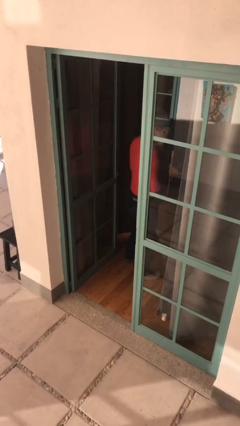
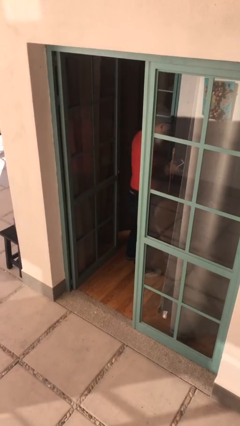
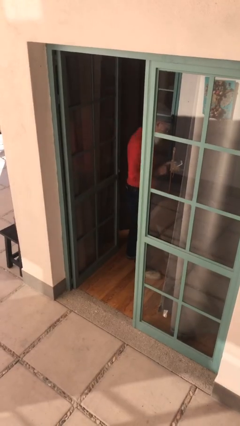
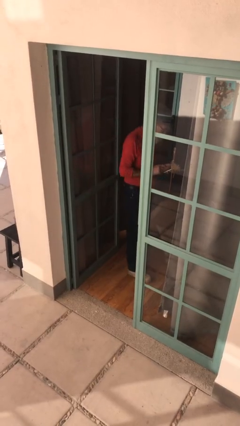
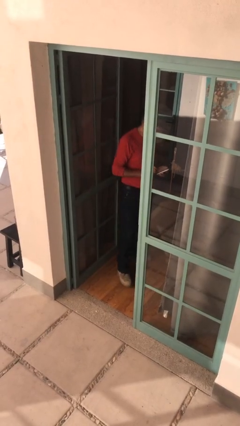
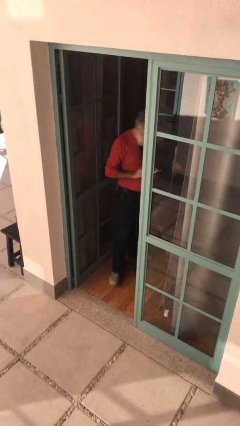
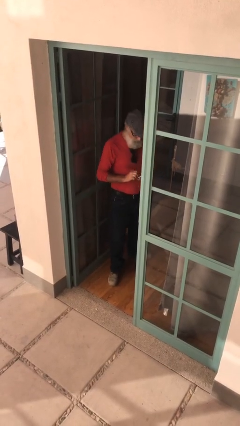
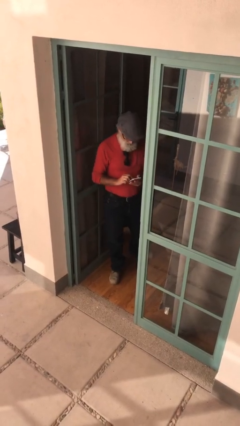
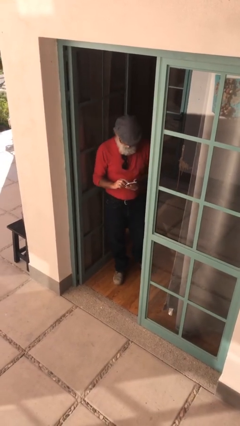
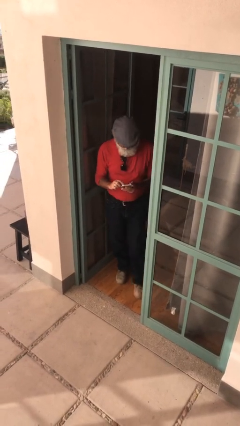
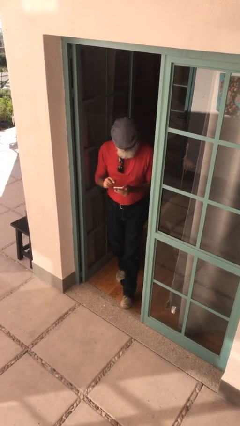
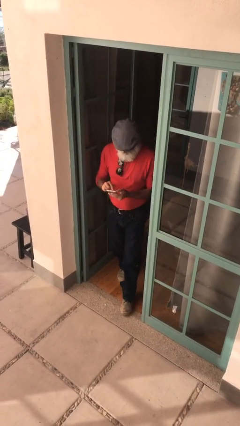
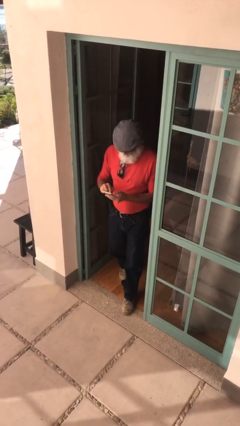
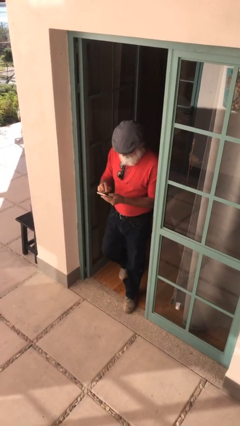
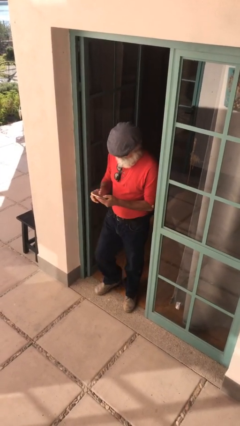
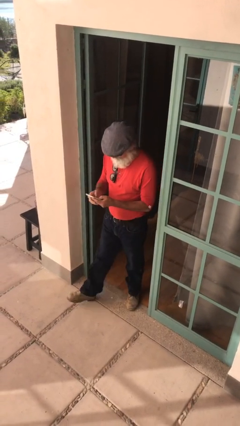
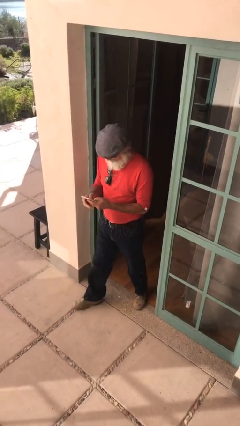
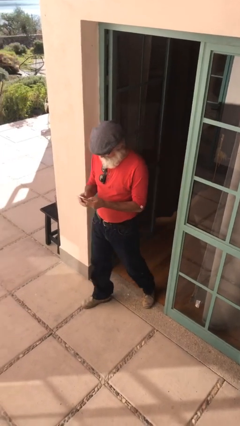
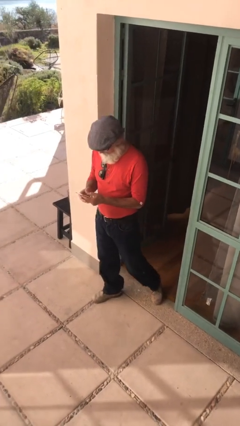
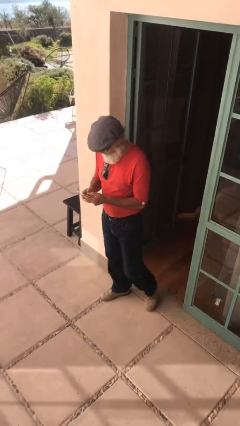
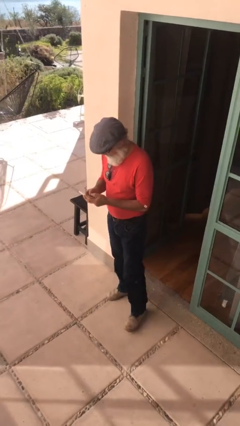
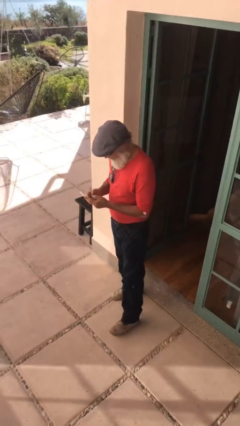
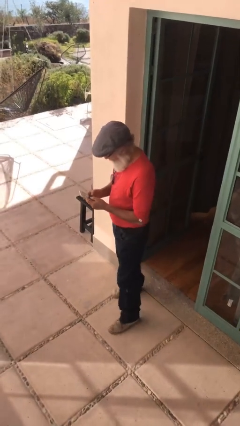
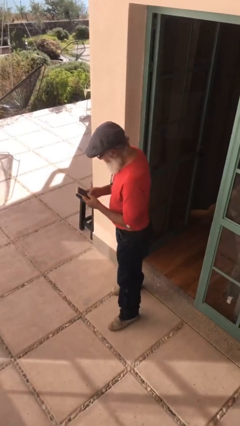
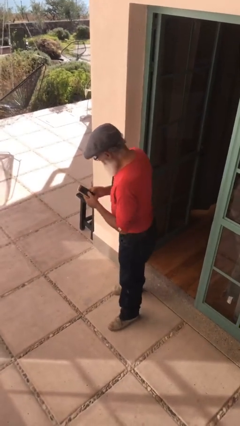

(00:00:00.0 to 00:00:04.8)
person enters scene through structure

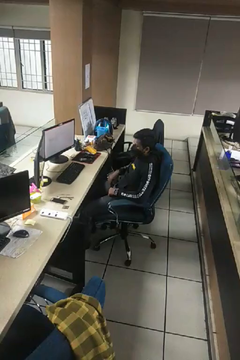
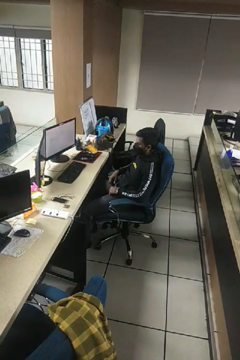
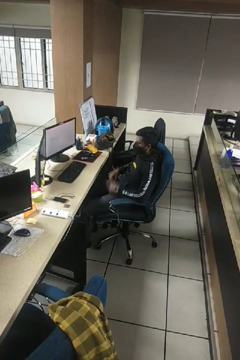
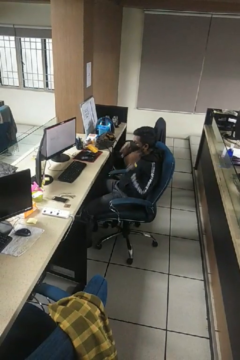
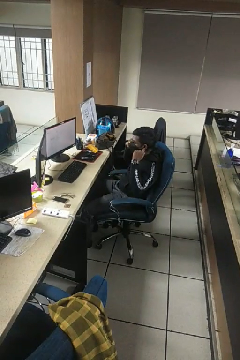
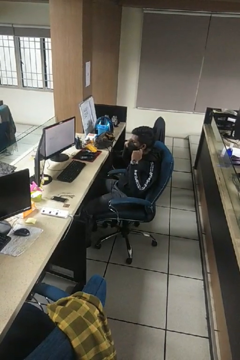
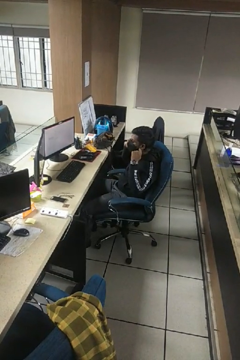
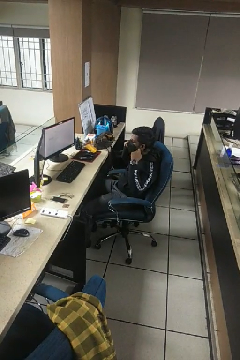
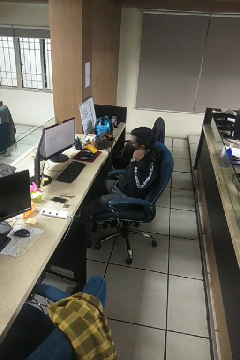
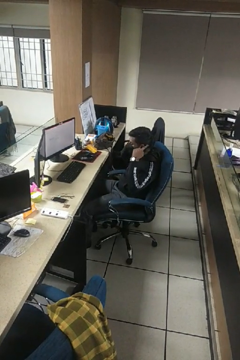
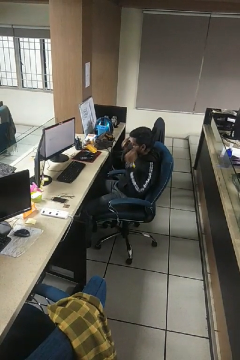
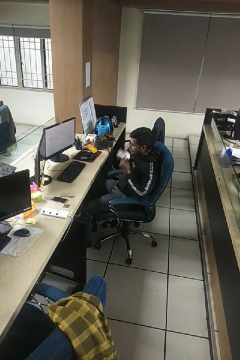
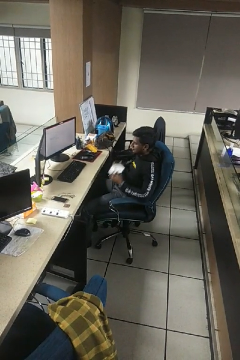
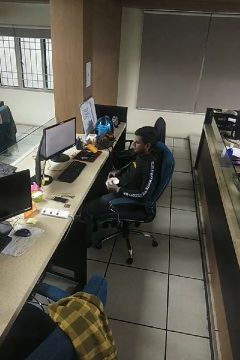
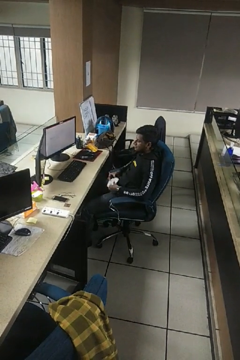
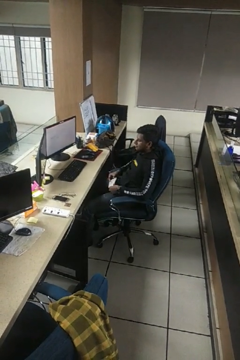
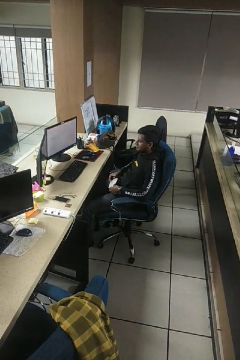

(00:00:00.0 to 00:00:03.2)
person takes off facemask

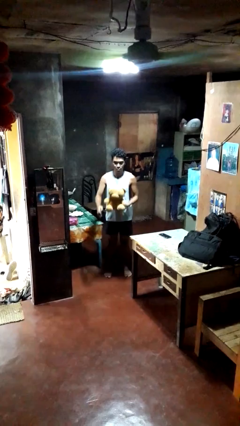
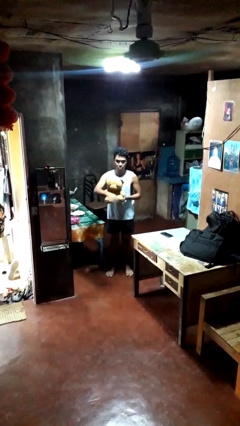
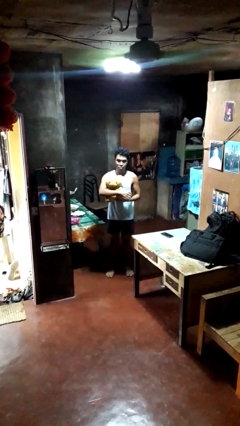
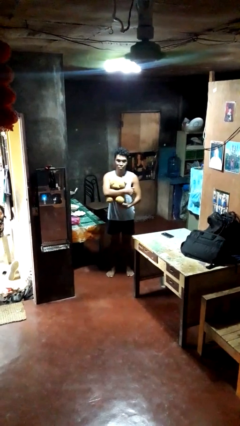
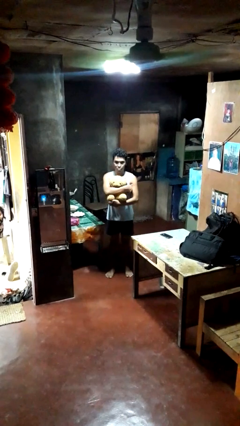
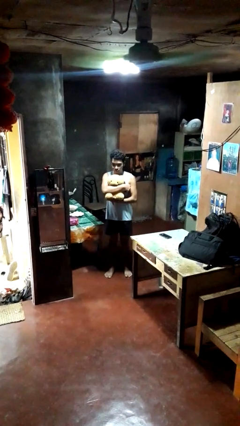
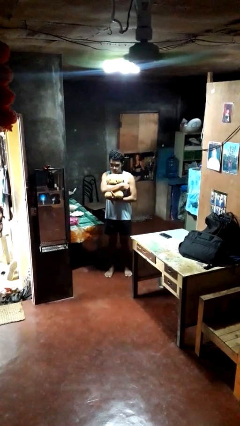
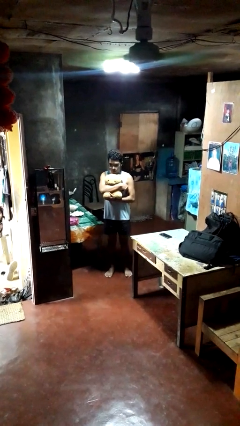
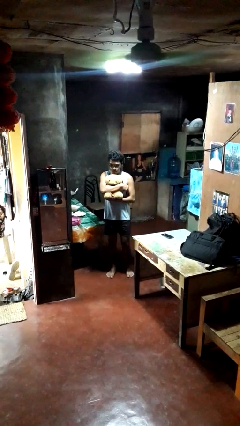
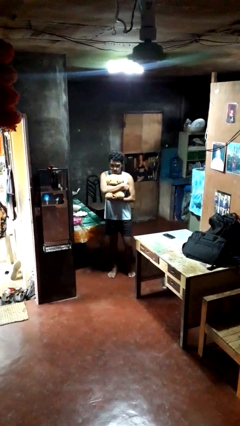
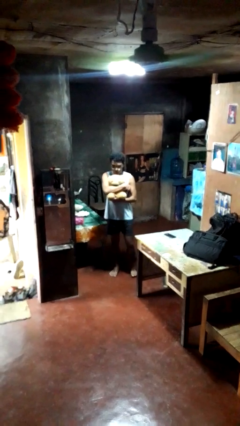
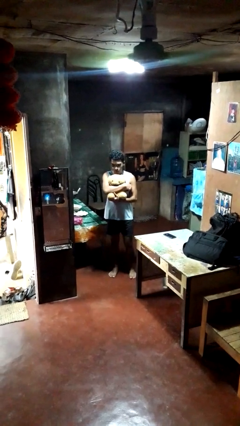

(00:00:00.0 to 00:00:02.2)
person hugs stuffed animal

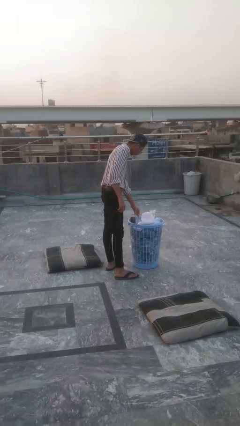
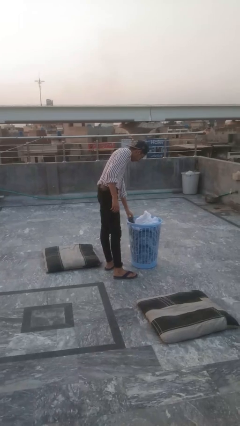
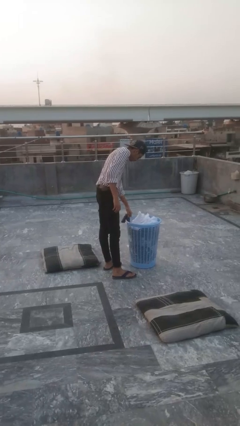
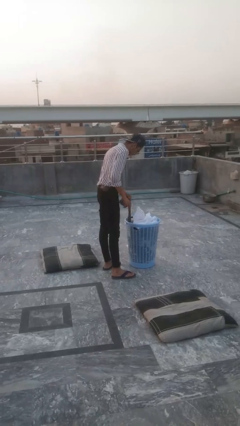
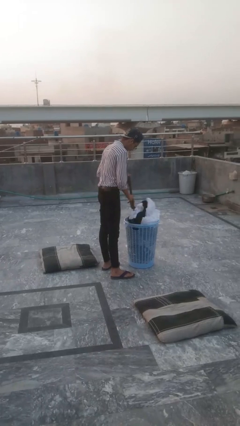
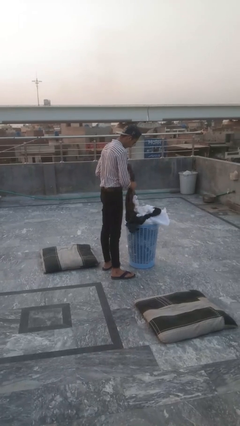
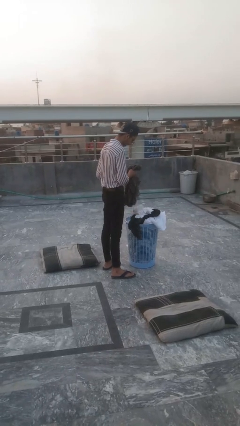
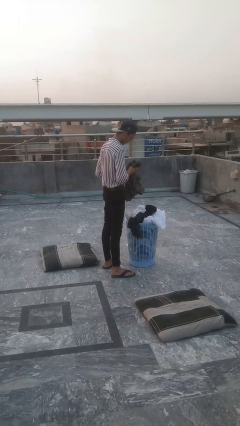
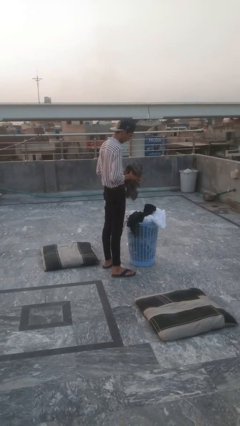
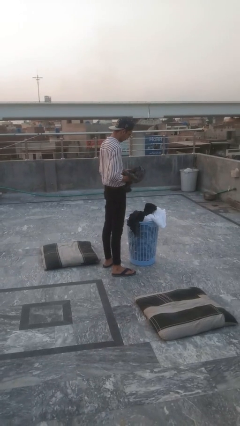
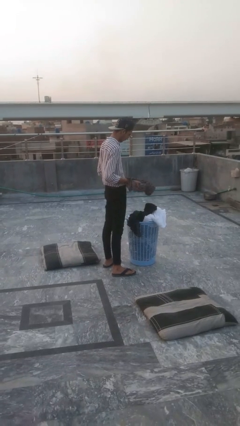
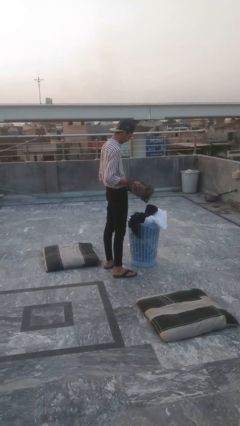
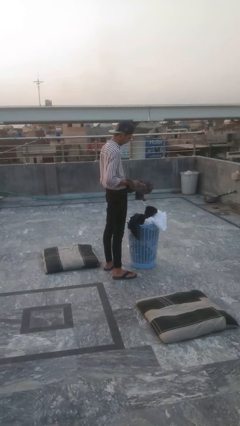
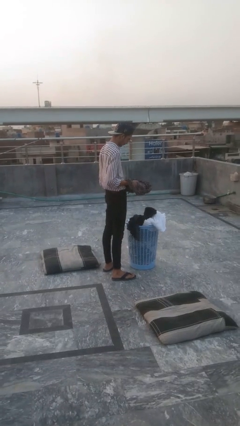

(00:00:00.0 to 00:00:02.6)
person takes object from basket

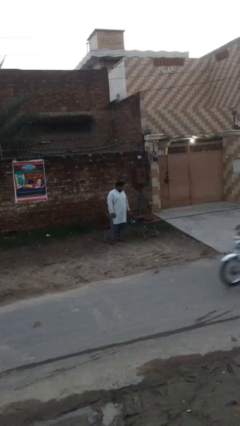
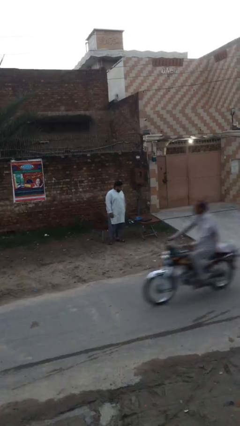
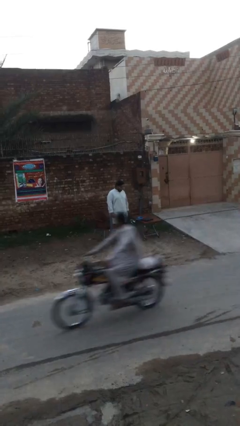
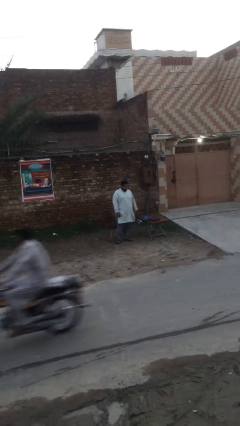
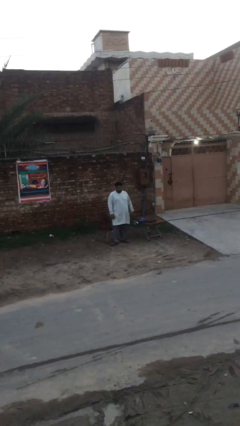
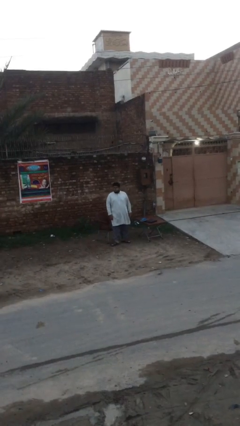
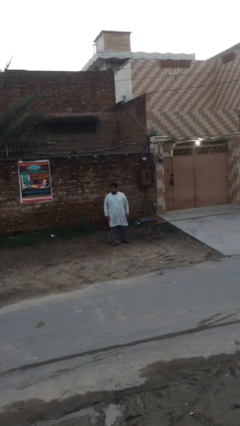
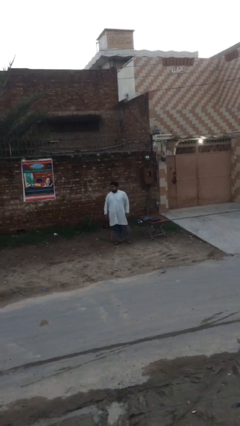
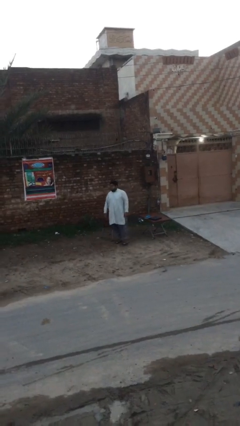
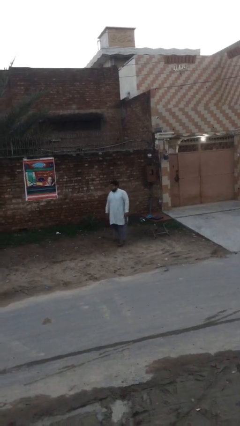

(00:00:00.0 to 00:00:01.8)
person puts down object on table

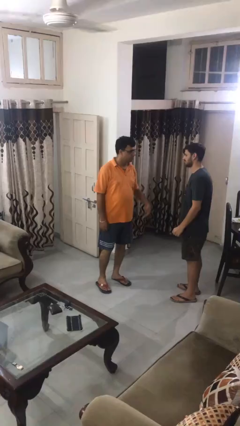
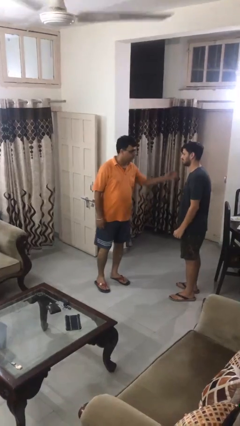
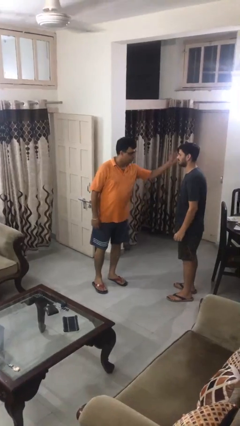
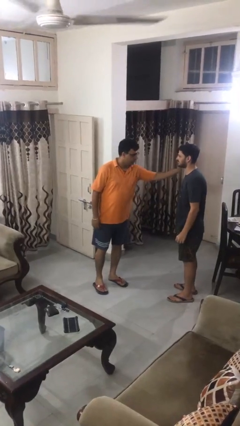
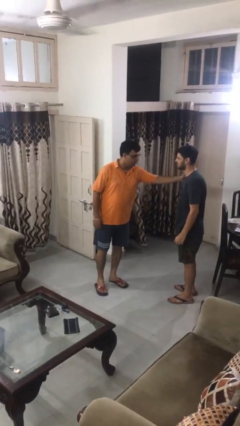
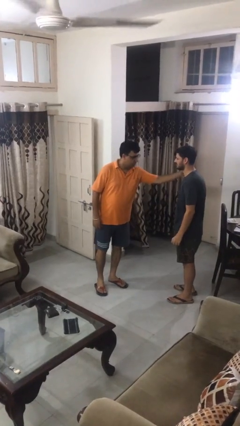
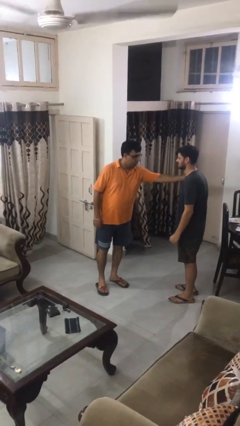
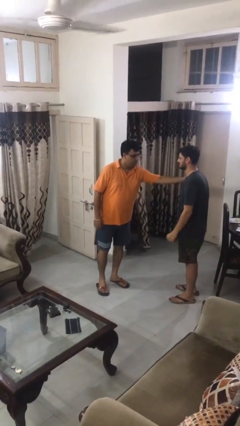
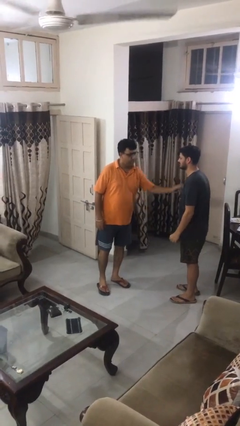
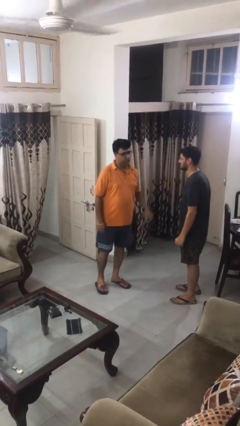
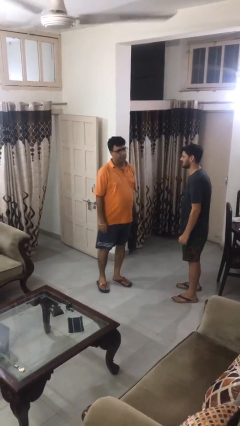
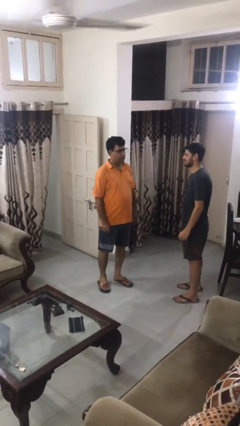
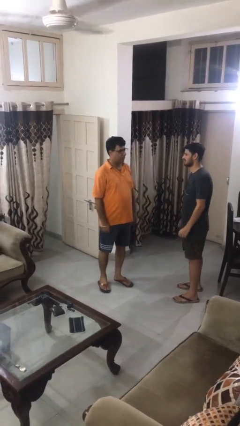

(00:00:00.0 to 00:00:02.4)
person pounds shoulders of person

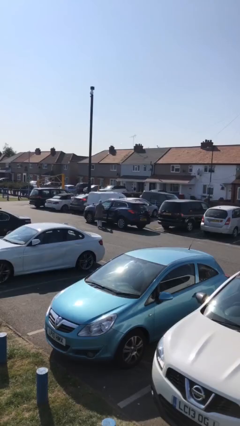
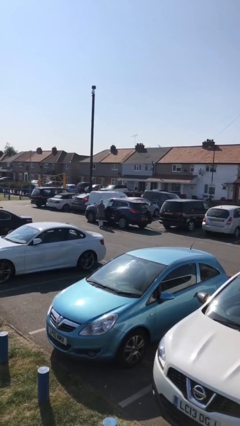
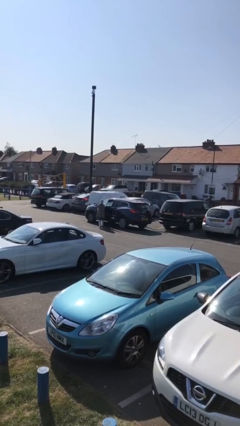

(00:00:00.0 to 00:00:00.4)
car picks up person

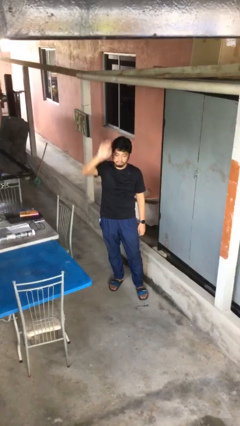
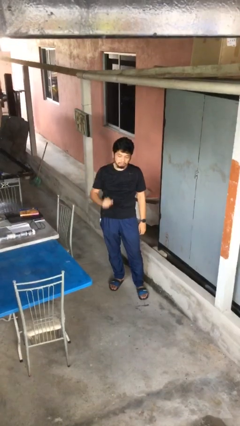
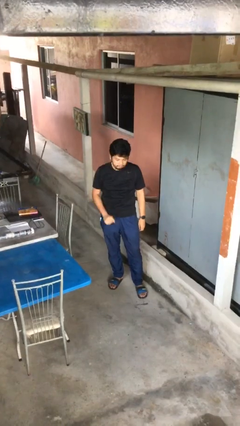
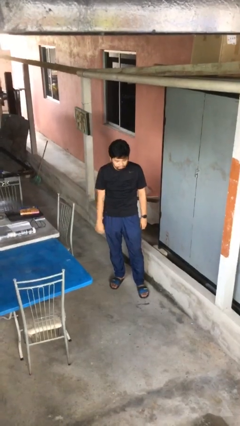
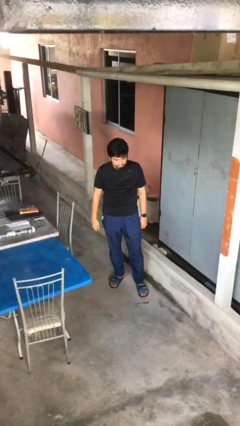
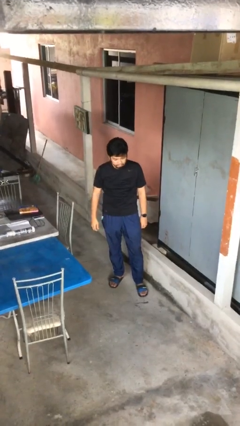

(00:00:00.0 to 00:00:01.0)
person gestures lower hand
